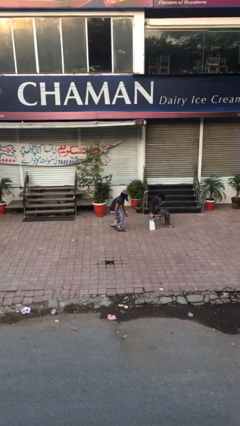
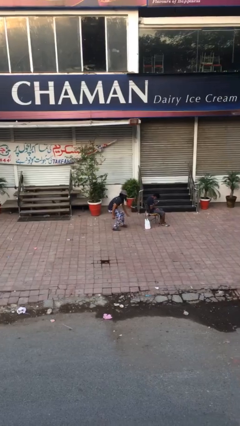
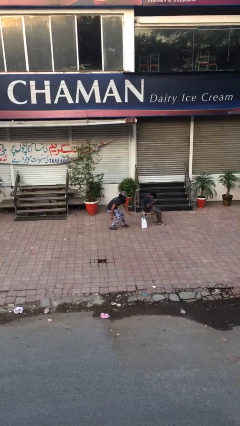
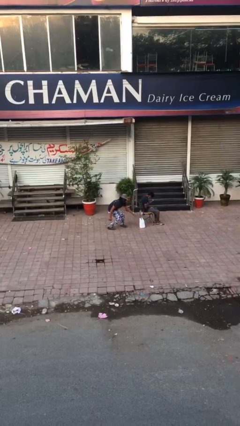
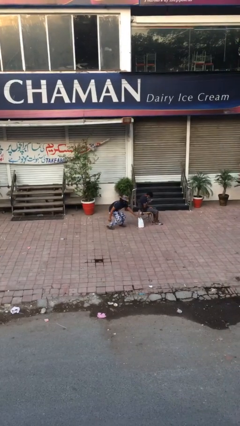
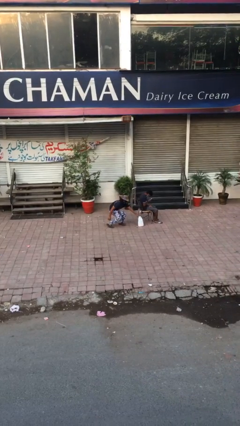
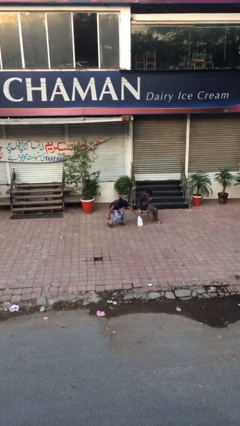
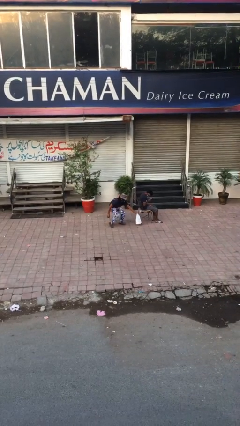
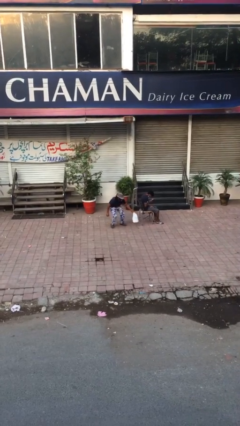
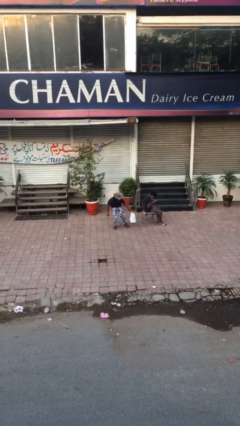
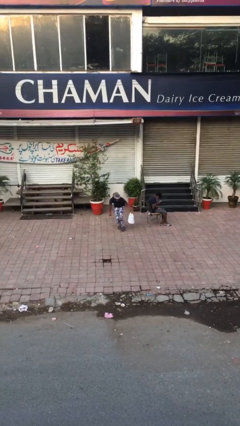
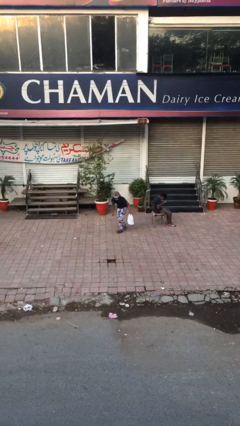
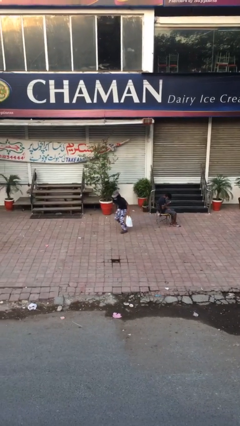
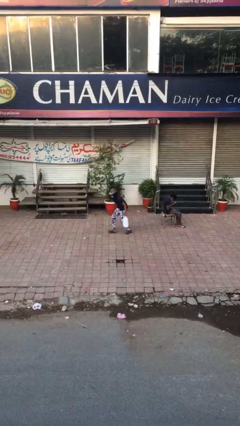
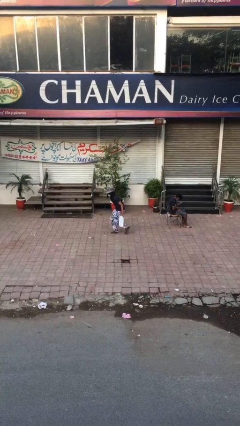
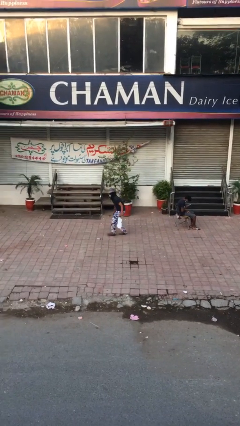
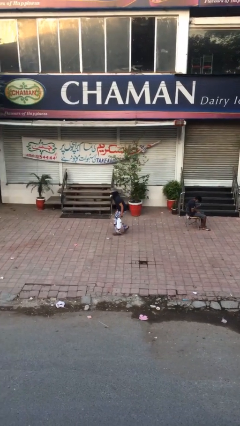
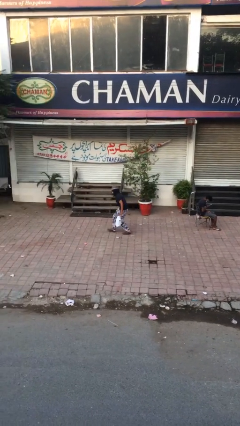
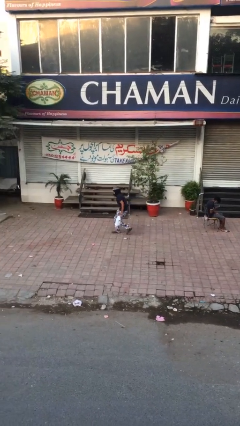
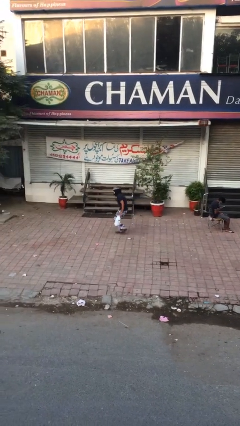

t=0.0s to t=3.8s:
person steals object from person

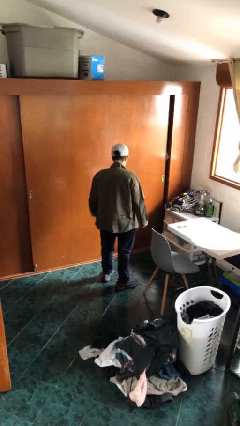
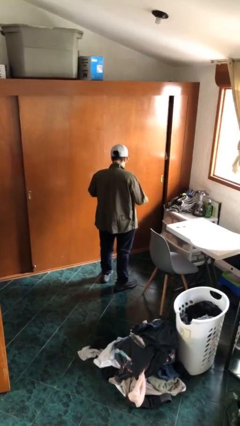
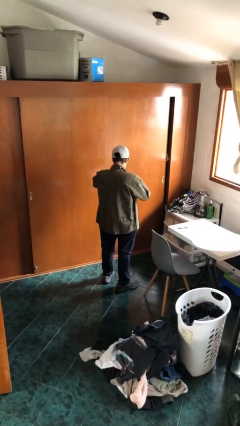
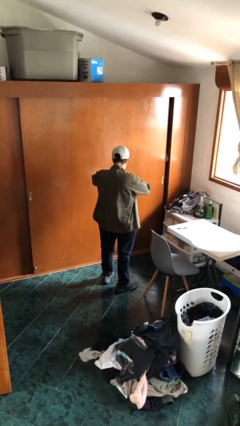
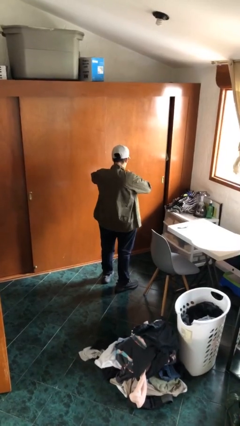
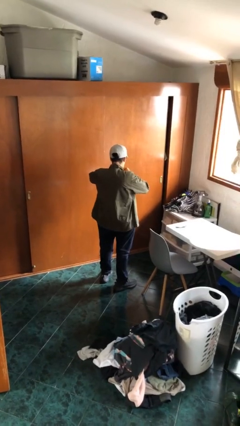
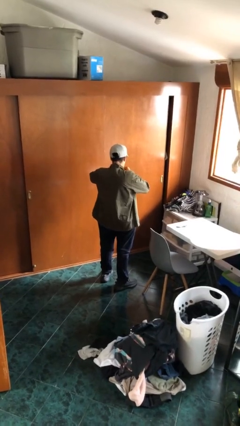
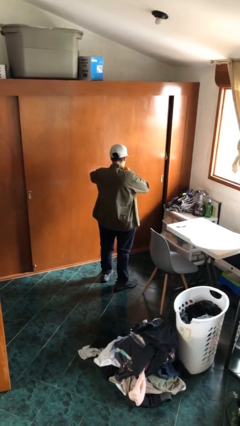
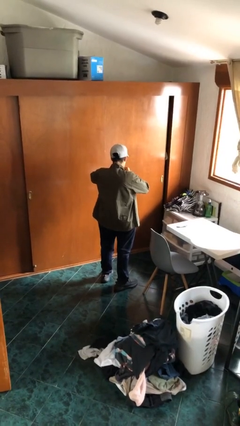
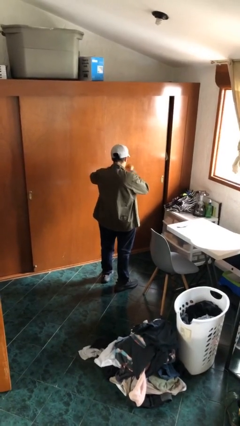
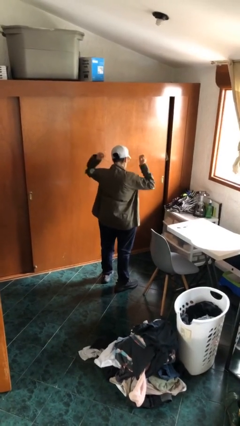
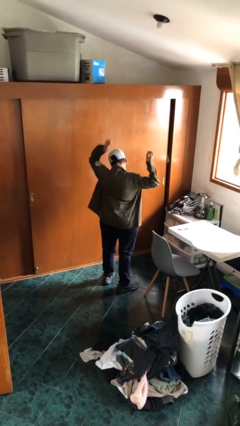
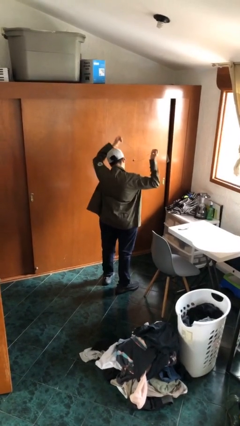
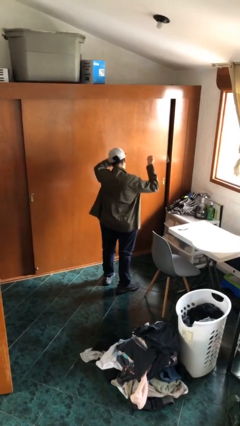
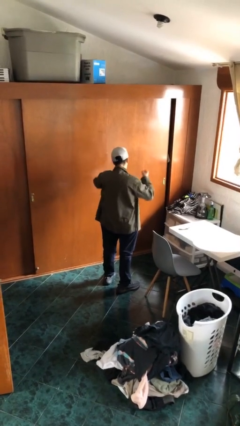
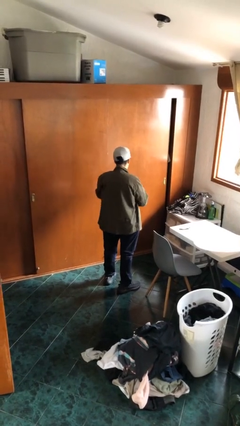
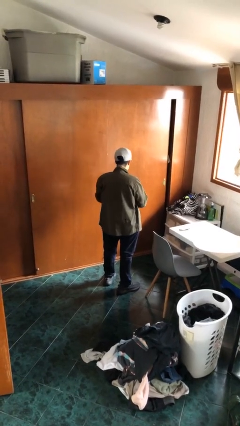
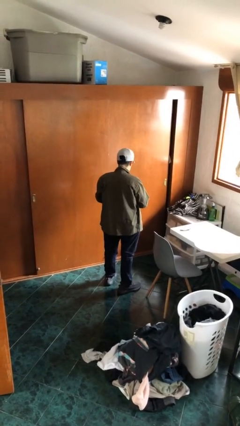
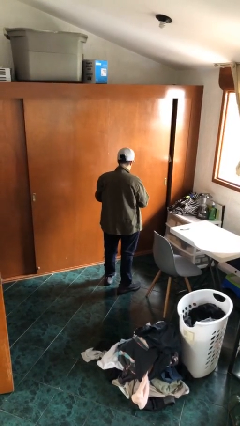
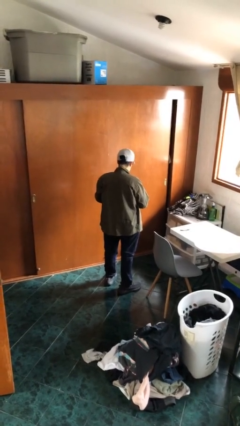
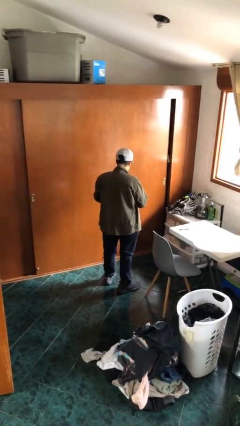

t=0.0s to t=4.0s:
person takes off necklace

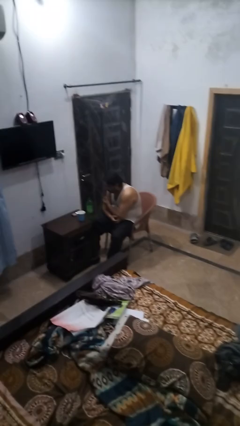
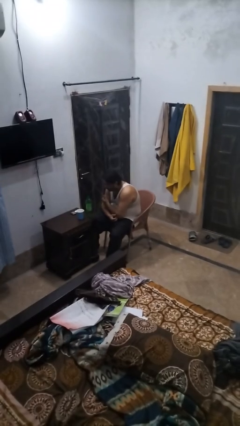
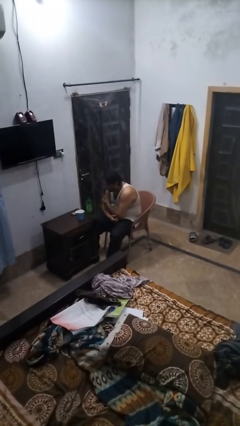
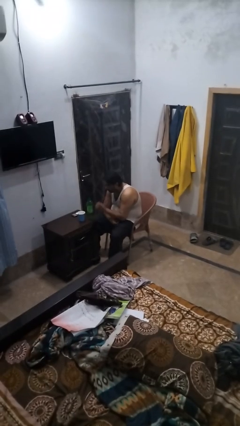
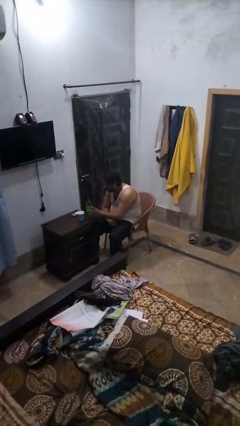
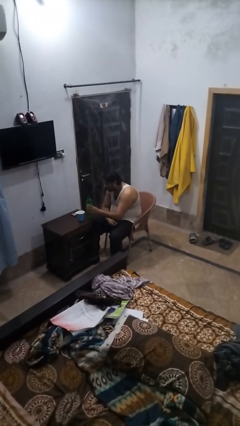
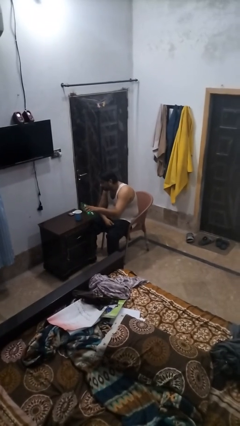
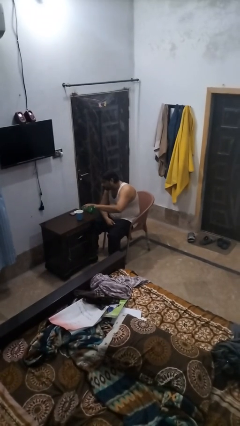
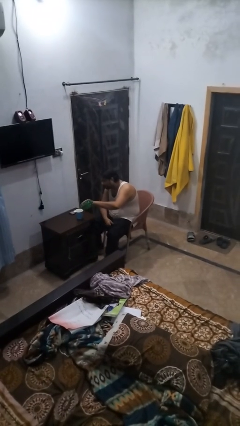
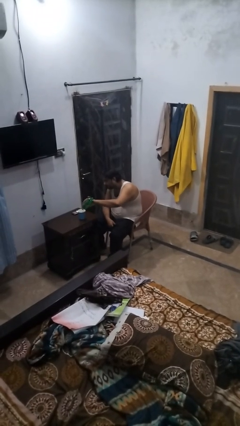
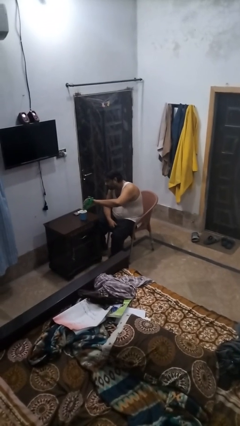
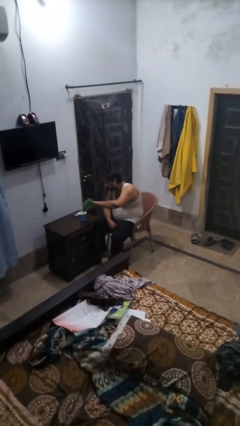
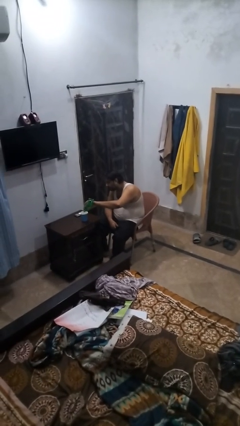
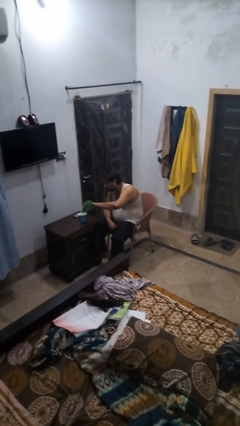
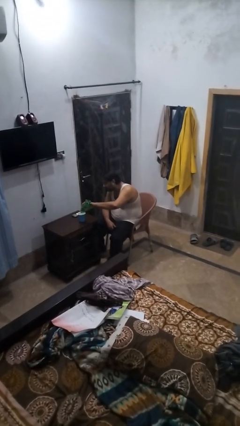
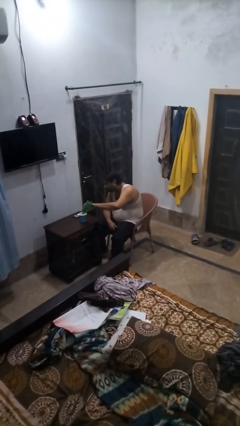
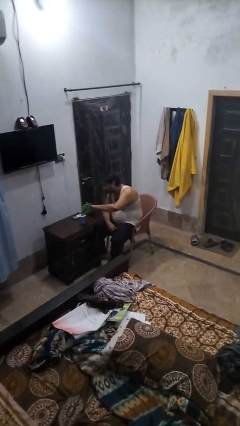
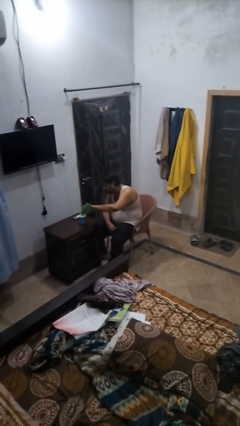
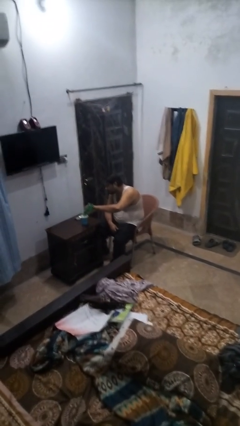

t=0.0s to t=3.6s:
person pours liquid into cup

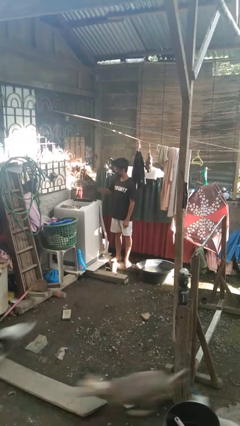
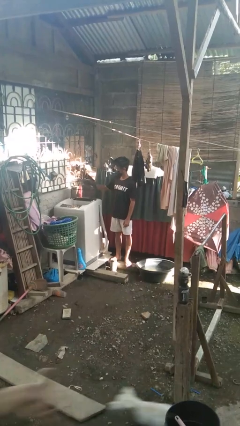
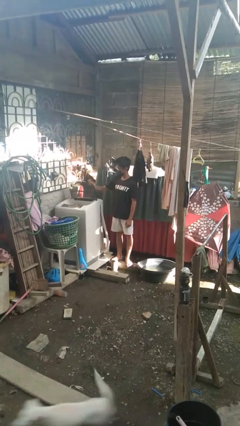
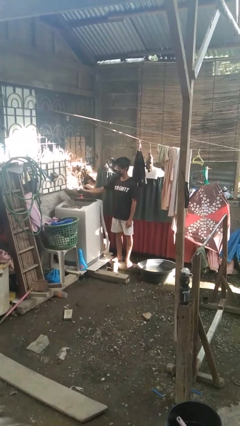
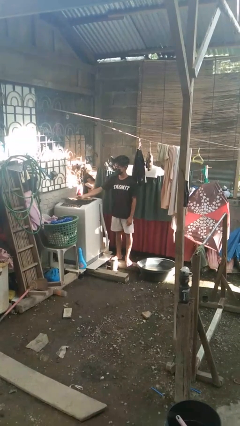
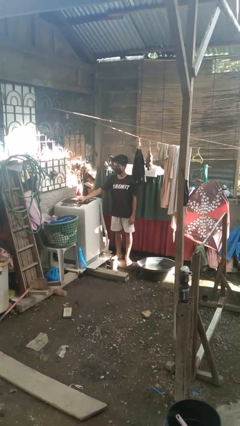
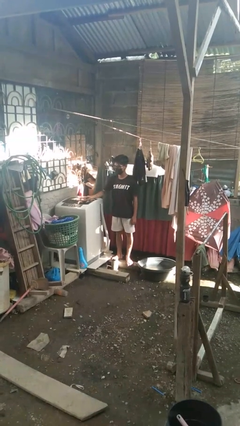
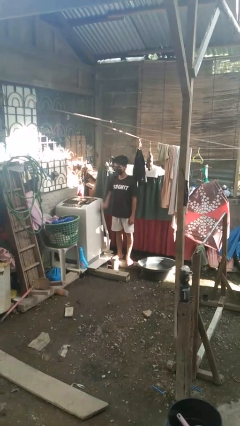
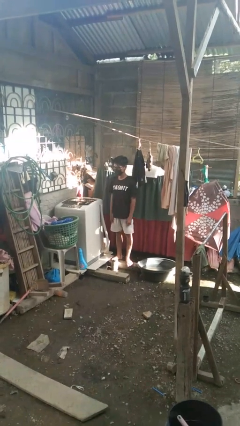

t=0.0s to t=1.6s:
person closes clothes washer

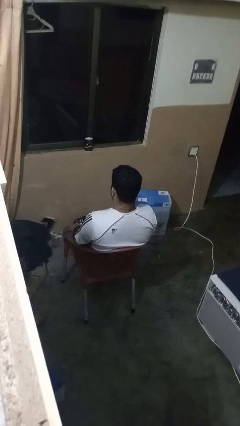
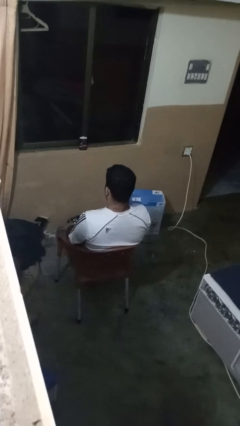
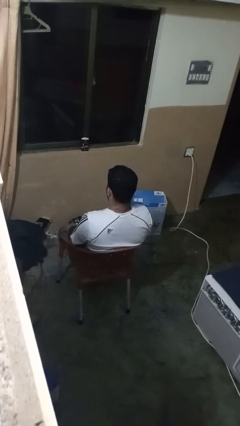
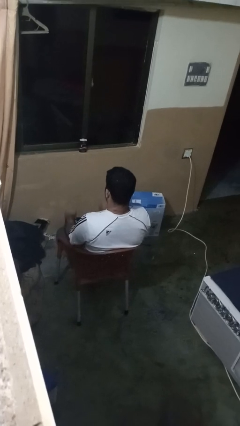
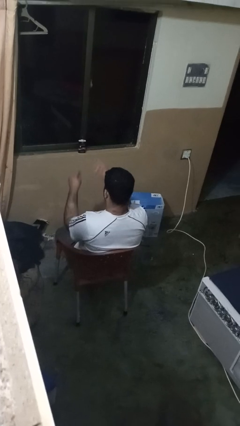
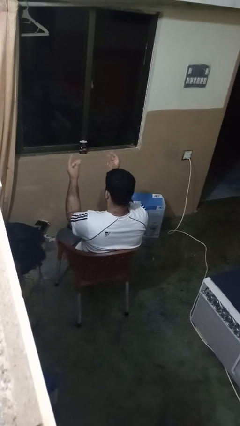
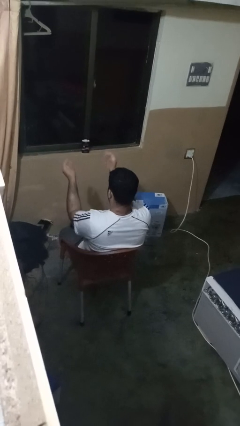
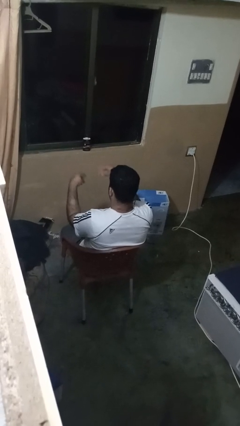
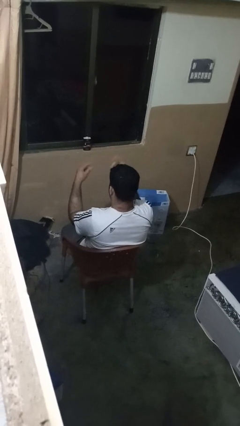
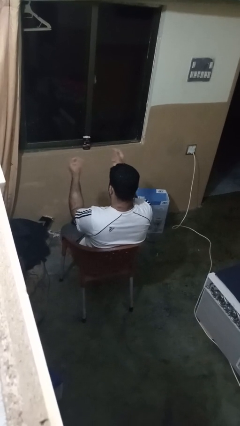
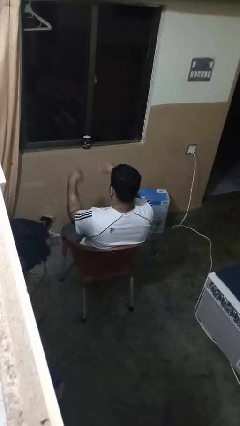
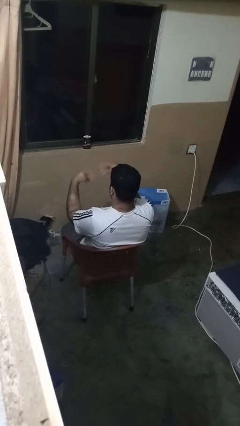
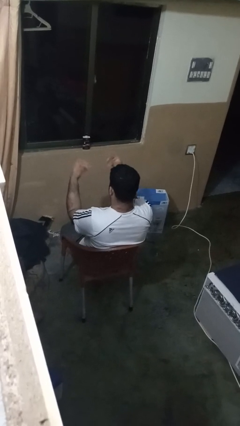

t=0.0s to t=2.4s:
person snaps fingers

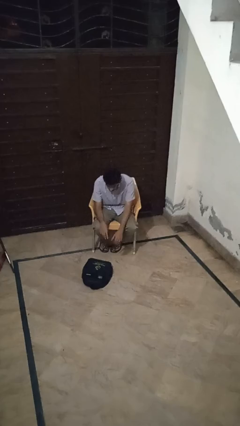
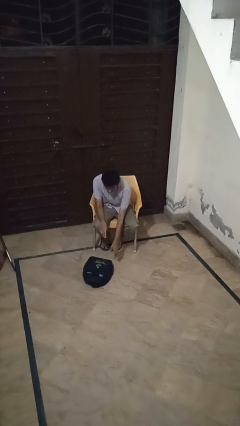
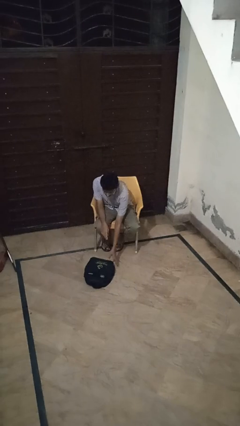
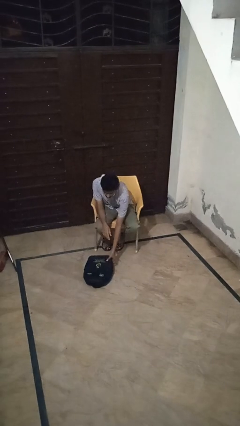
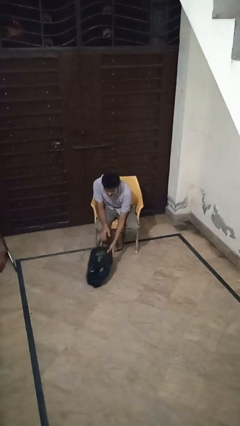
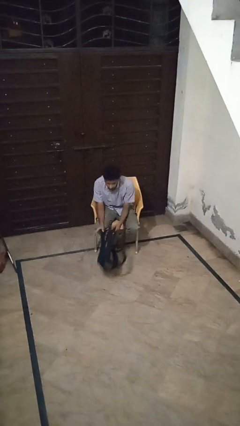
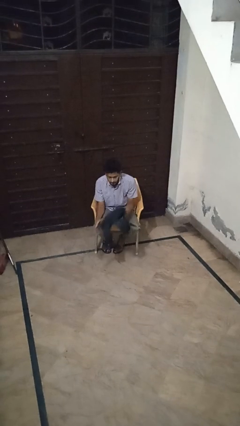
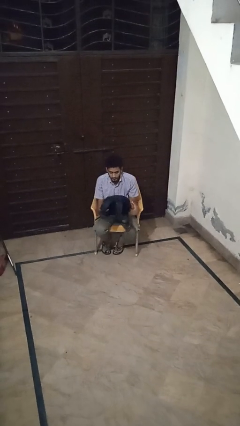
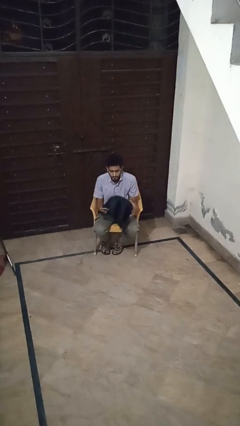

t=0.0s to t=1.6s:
person picks up object from floor
